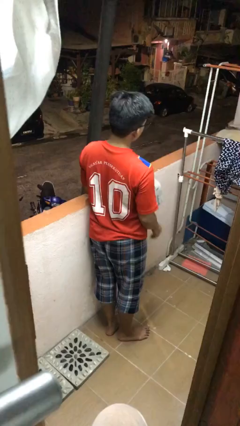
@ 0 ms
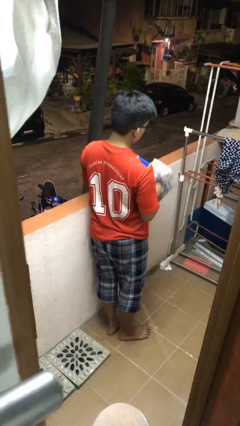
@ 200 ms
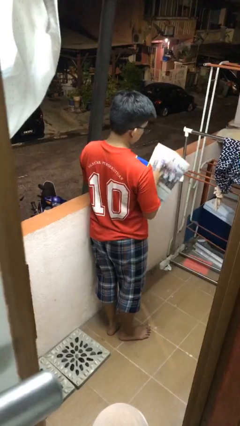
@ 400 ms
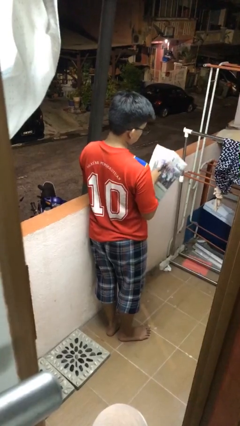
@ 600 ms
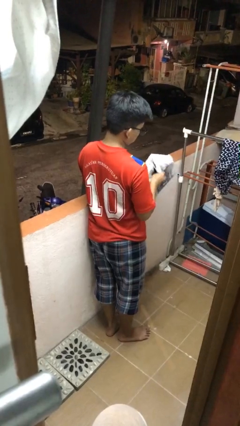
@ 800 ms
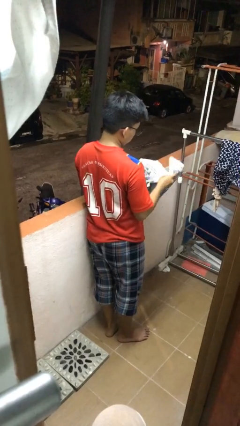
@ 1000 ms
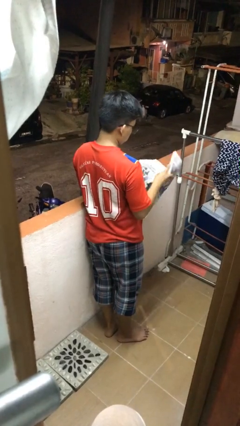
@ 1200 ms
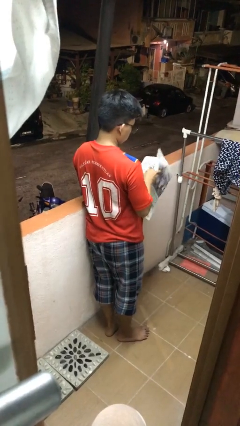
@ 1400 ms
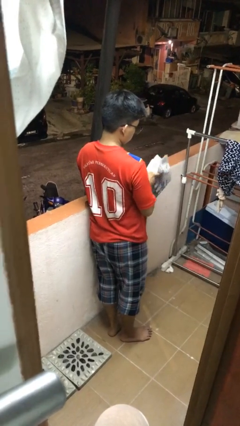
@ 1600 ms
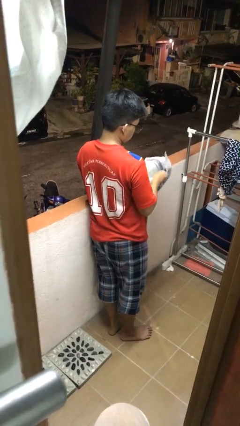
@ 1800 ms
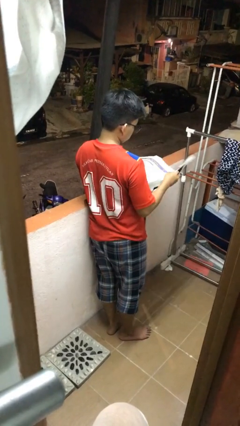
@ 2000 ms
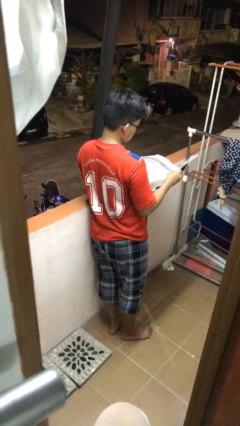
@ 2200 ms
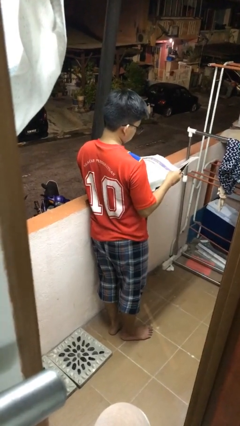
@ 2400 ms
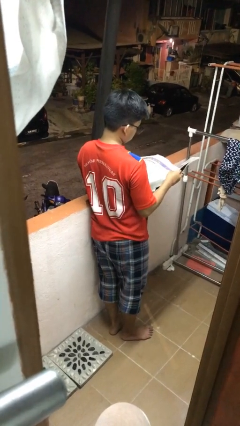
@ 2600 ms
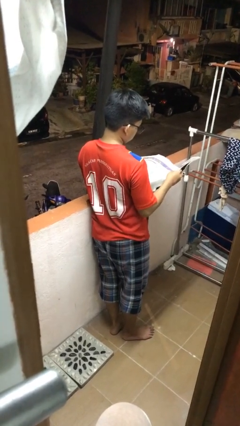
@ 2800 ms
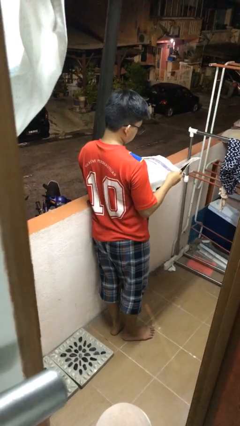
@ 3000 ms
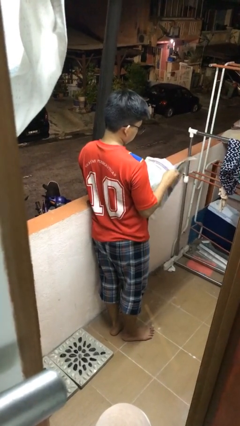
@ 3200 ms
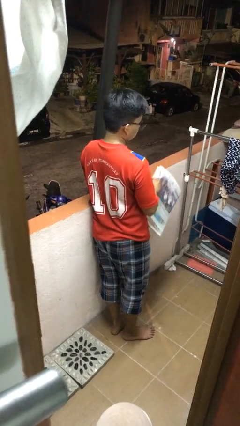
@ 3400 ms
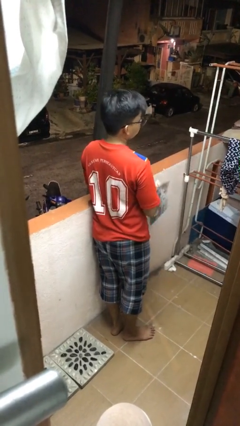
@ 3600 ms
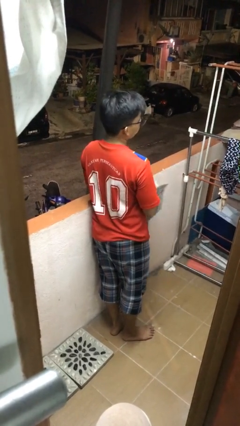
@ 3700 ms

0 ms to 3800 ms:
person reads newspaper

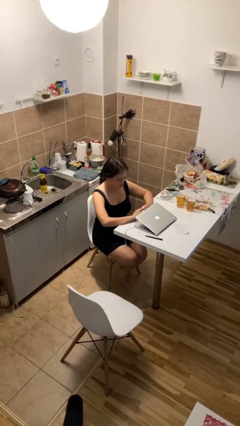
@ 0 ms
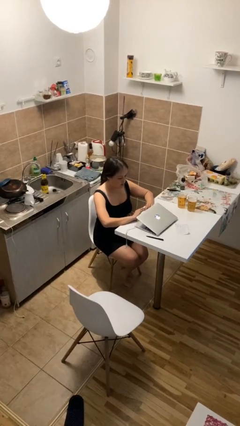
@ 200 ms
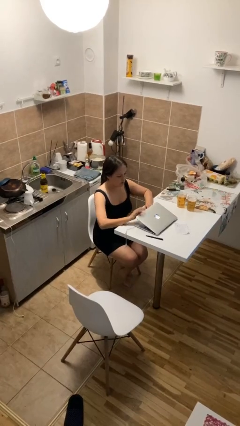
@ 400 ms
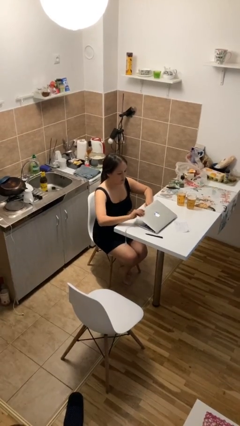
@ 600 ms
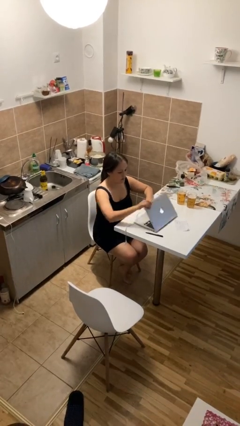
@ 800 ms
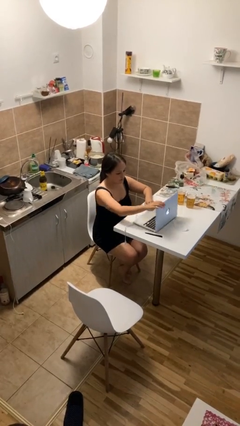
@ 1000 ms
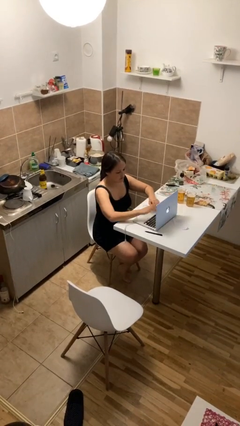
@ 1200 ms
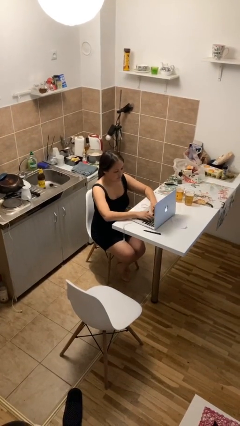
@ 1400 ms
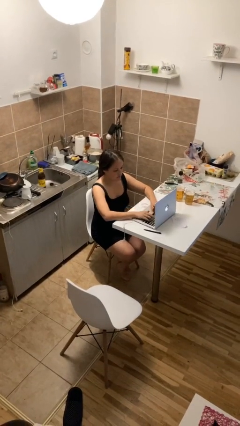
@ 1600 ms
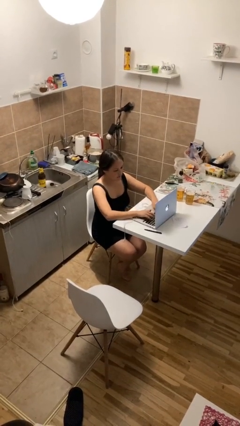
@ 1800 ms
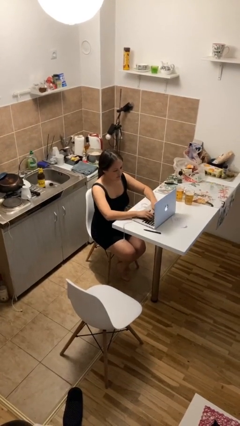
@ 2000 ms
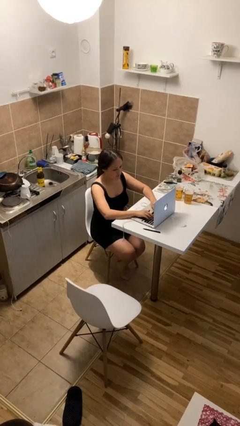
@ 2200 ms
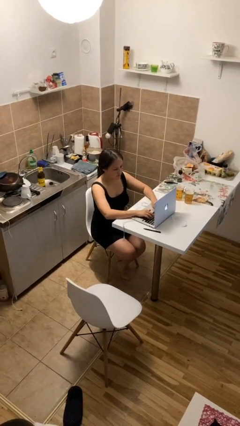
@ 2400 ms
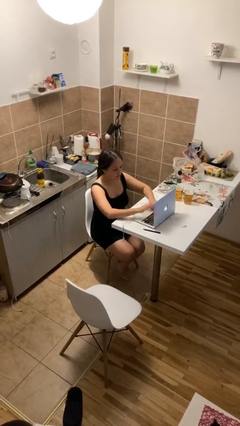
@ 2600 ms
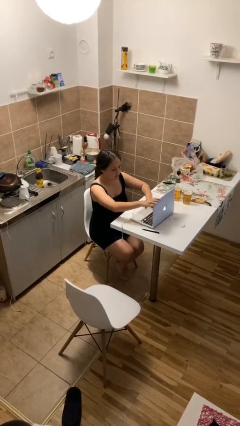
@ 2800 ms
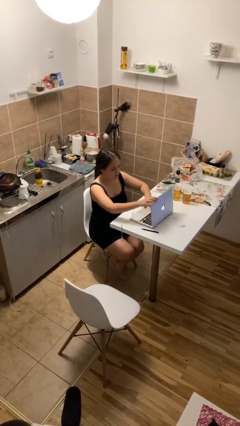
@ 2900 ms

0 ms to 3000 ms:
person interacts with laptop

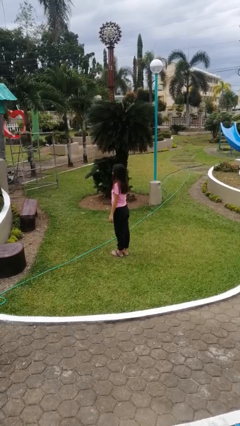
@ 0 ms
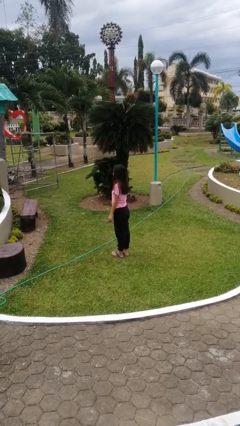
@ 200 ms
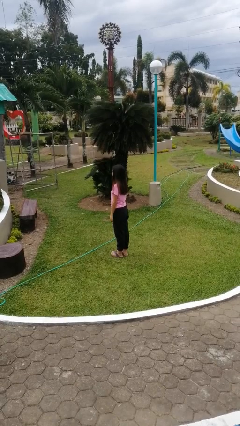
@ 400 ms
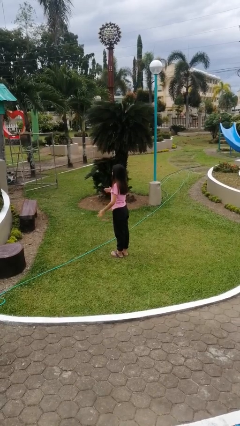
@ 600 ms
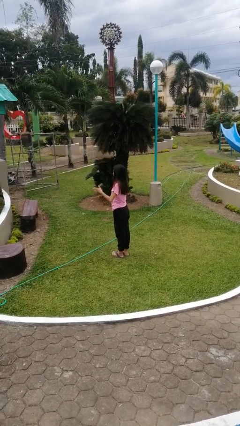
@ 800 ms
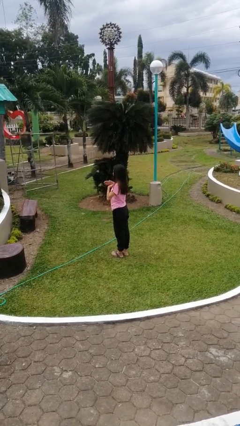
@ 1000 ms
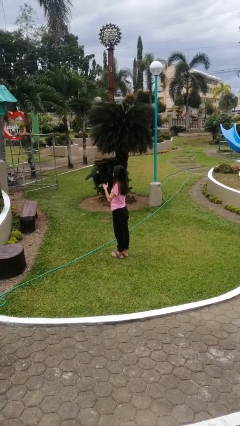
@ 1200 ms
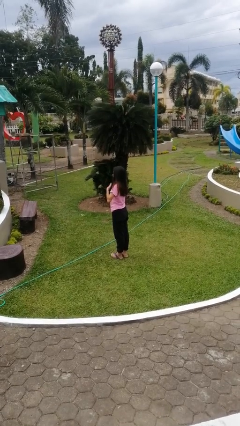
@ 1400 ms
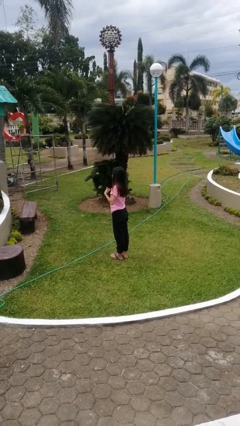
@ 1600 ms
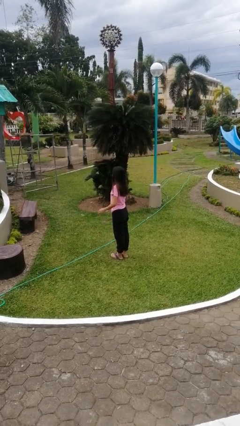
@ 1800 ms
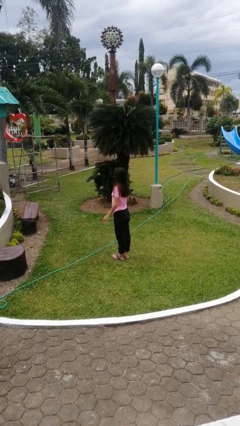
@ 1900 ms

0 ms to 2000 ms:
person drums on chest

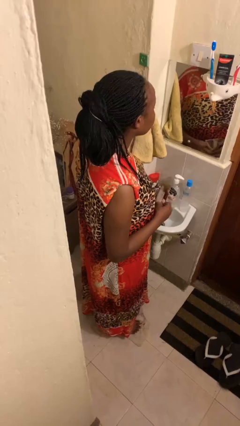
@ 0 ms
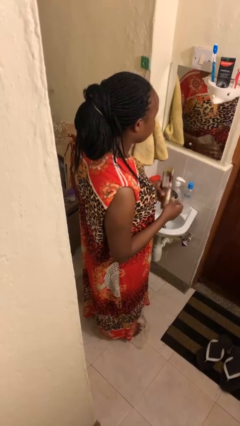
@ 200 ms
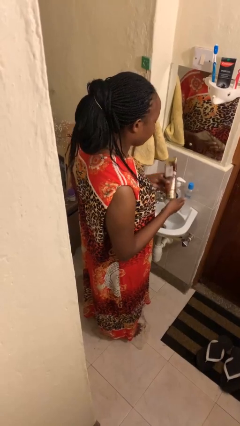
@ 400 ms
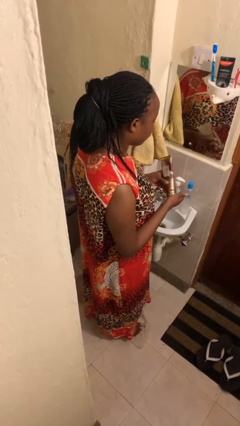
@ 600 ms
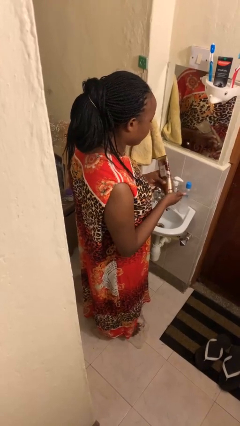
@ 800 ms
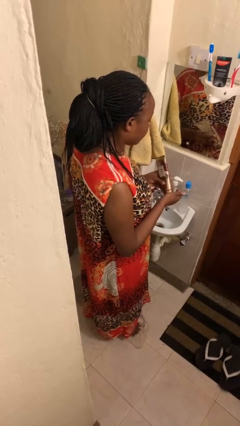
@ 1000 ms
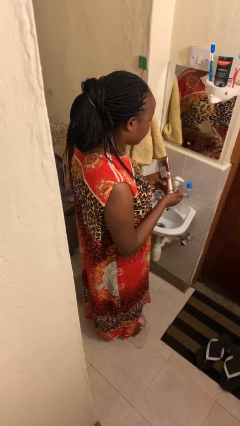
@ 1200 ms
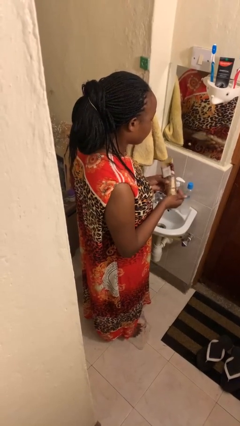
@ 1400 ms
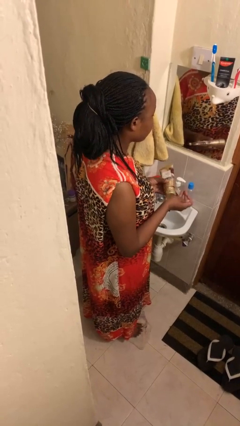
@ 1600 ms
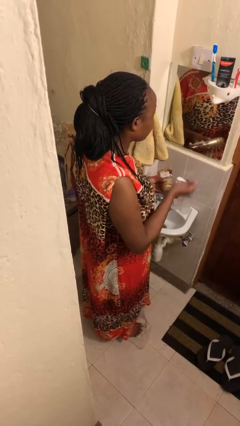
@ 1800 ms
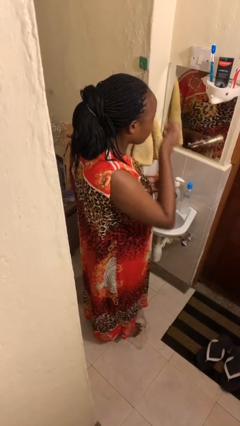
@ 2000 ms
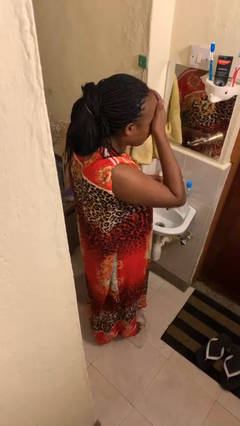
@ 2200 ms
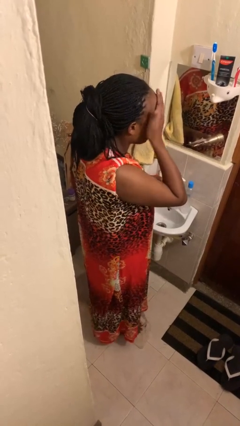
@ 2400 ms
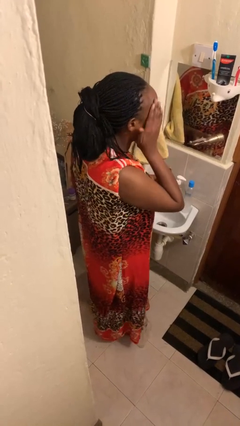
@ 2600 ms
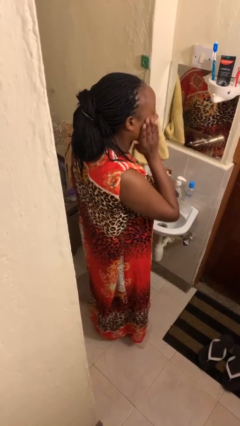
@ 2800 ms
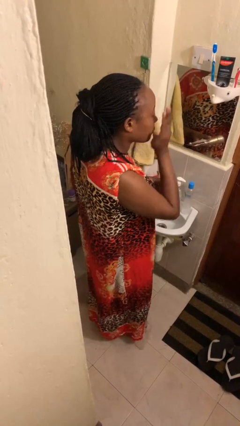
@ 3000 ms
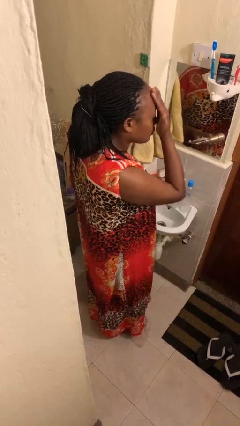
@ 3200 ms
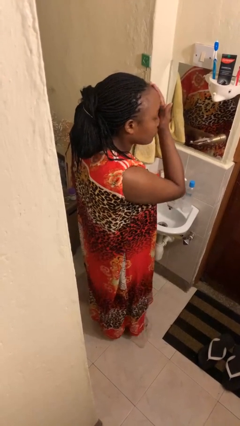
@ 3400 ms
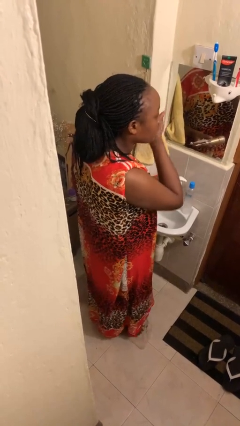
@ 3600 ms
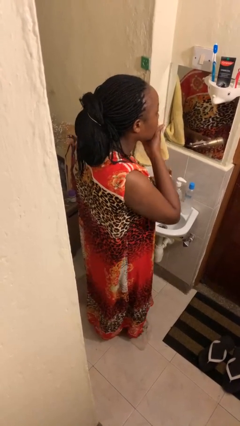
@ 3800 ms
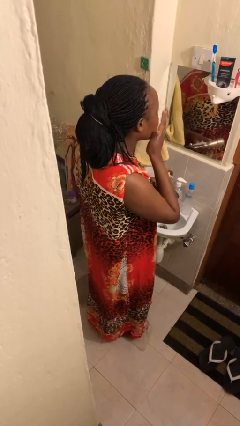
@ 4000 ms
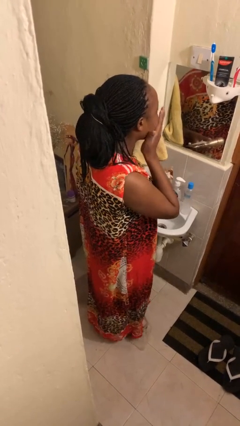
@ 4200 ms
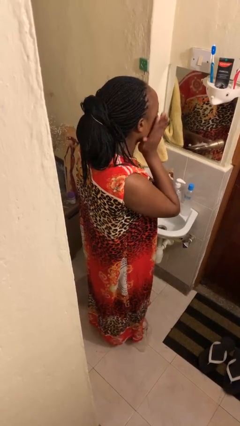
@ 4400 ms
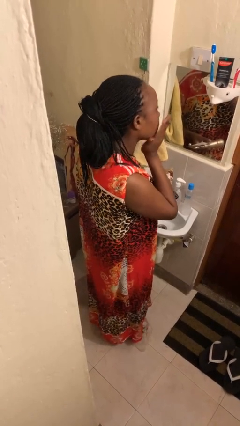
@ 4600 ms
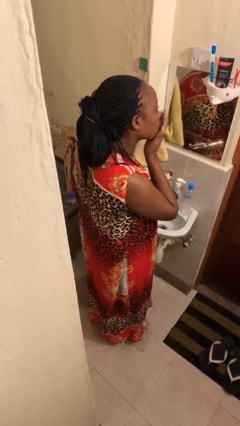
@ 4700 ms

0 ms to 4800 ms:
person applies facial moisturizer

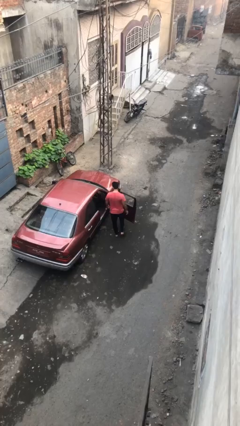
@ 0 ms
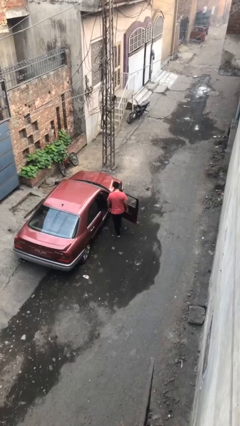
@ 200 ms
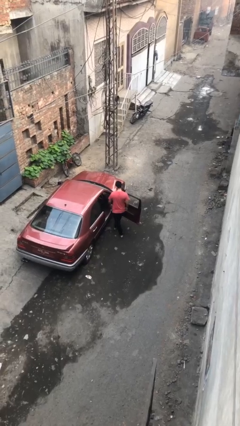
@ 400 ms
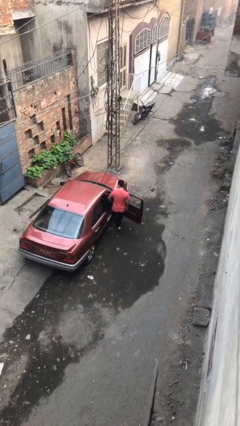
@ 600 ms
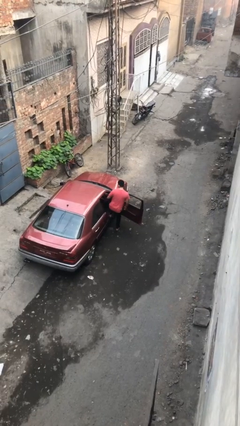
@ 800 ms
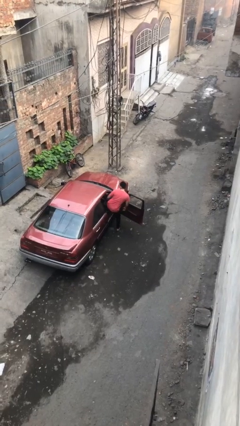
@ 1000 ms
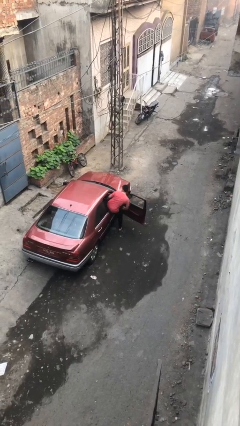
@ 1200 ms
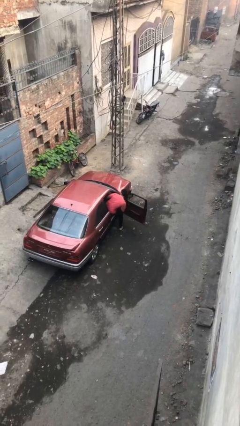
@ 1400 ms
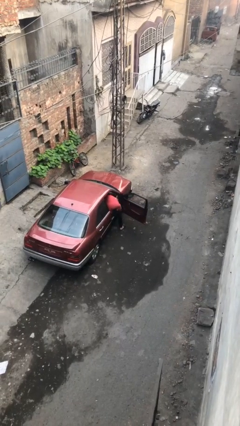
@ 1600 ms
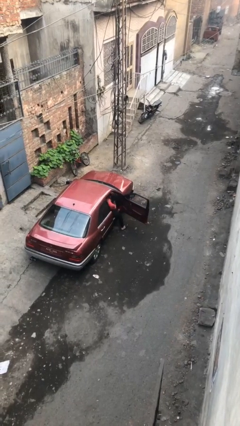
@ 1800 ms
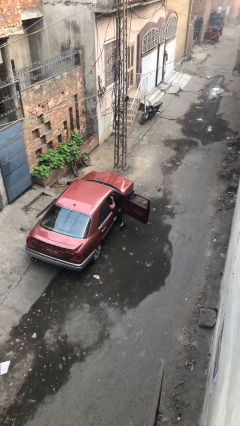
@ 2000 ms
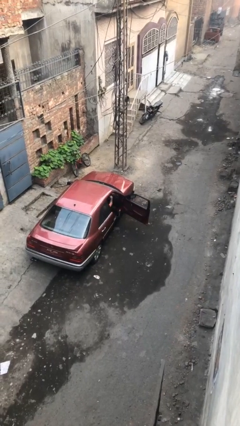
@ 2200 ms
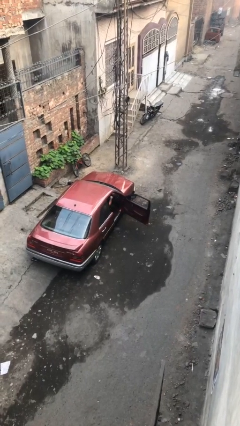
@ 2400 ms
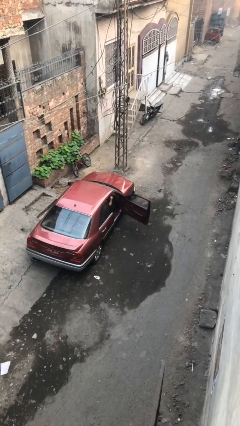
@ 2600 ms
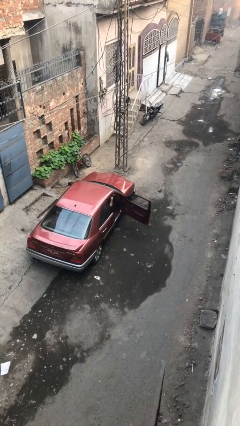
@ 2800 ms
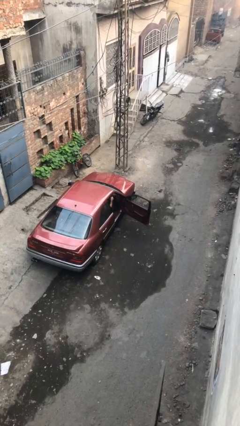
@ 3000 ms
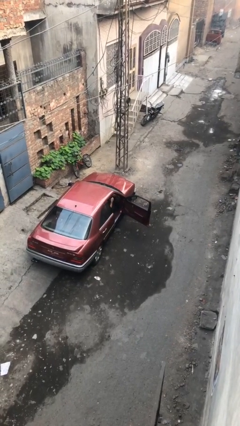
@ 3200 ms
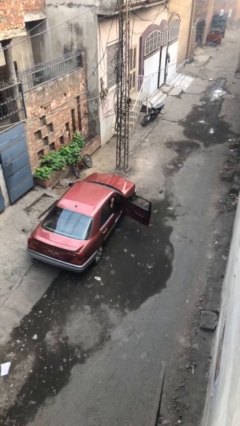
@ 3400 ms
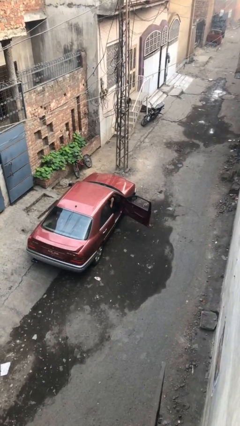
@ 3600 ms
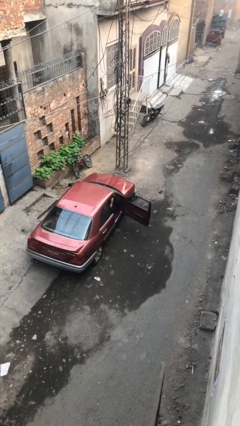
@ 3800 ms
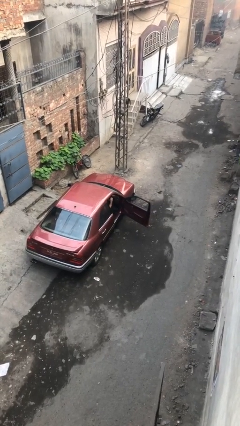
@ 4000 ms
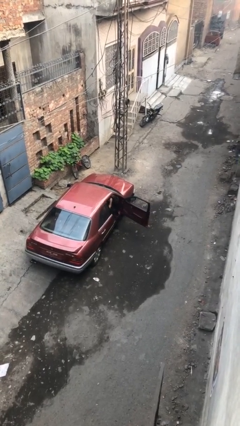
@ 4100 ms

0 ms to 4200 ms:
person enters car
